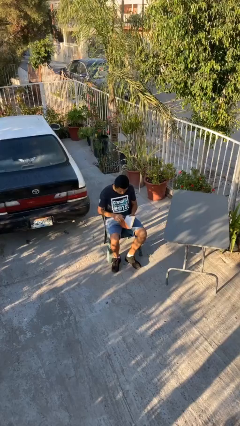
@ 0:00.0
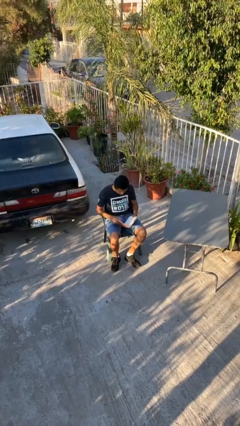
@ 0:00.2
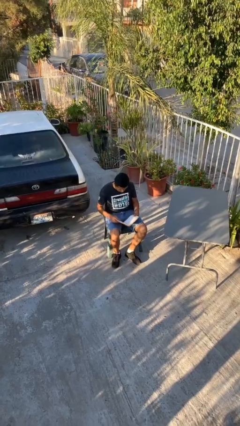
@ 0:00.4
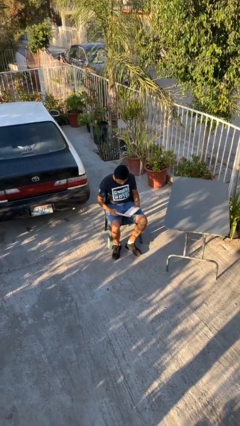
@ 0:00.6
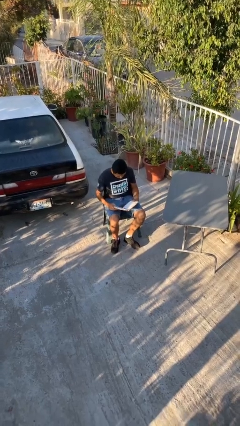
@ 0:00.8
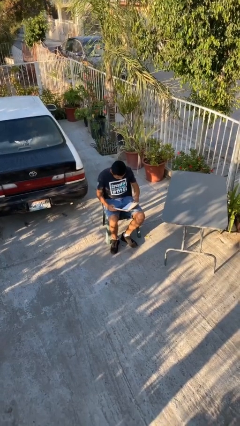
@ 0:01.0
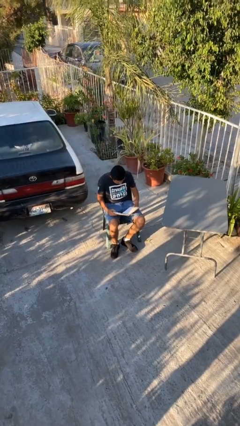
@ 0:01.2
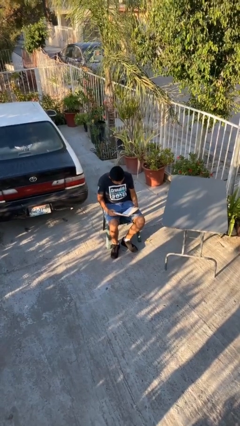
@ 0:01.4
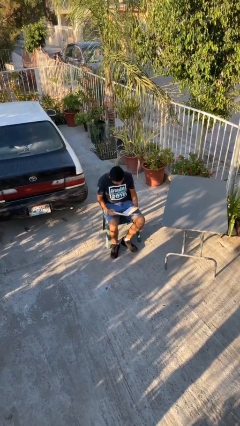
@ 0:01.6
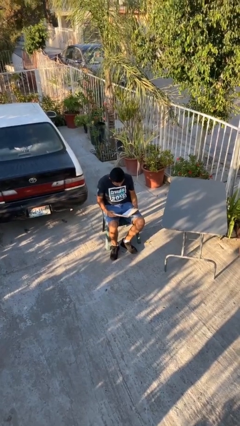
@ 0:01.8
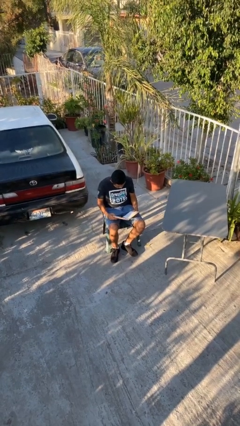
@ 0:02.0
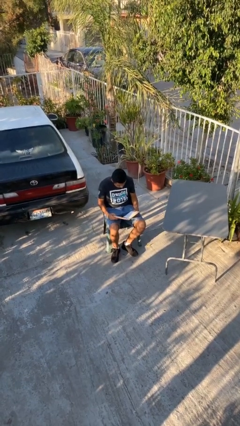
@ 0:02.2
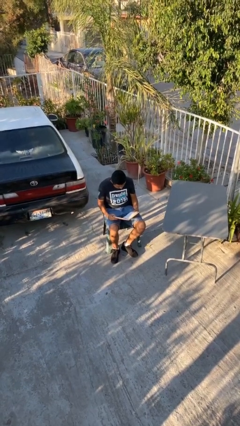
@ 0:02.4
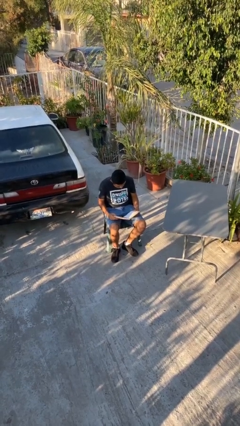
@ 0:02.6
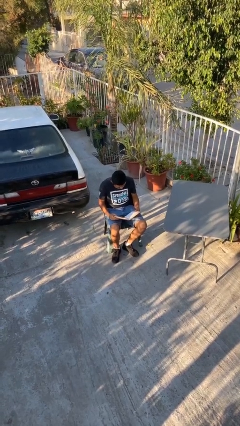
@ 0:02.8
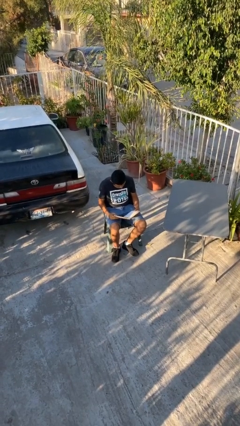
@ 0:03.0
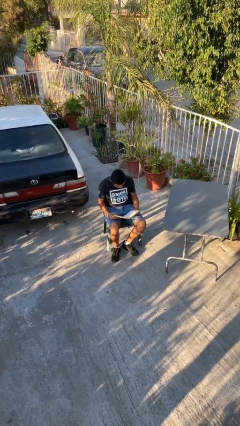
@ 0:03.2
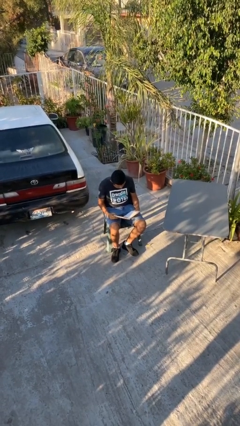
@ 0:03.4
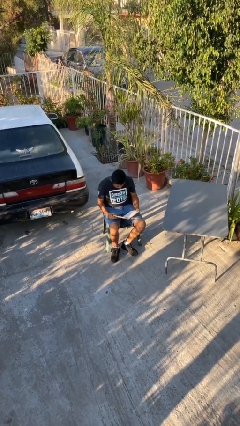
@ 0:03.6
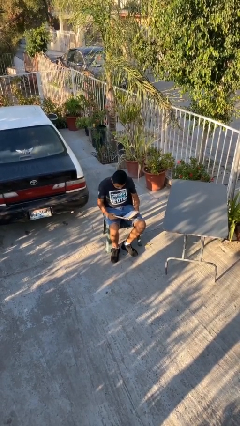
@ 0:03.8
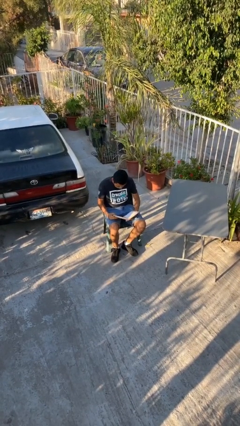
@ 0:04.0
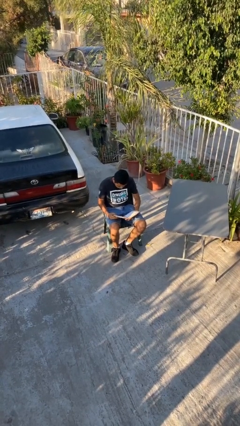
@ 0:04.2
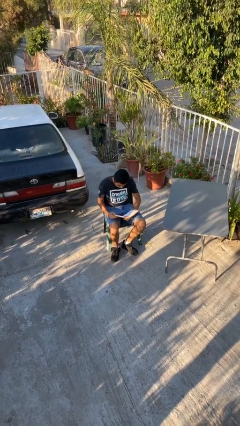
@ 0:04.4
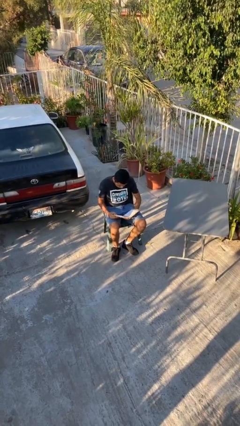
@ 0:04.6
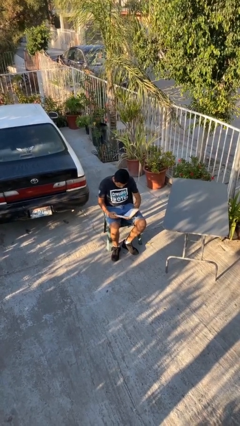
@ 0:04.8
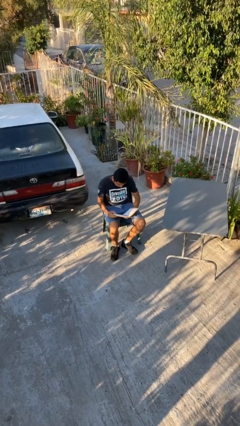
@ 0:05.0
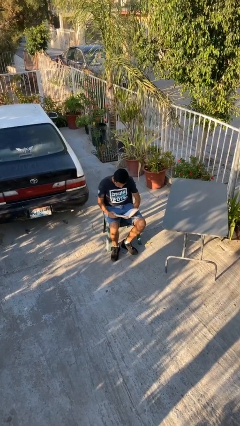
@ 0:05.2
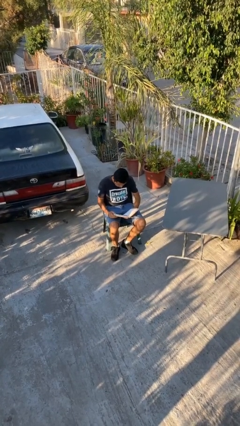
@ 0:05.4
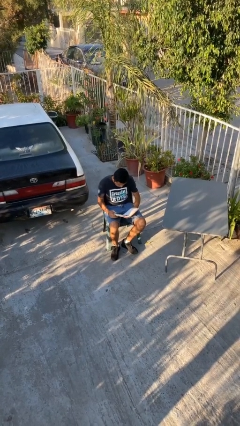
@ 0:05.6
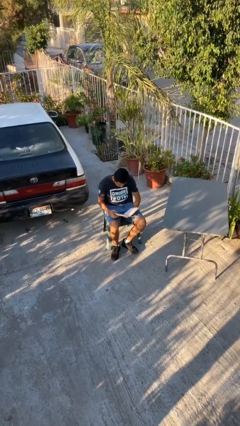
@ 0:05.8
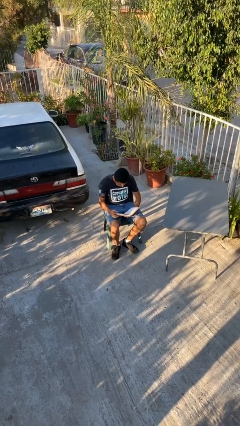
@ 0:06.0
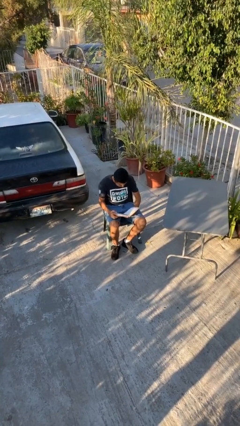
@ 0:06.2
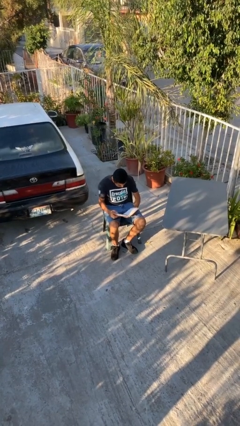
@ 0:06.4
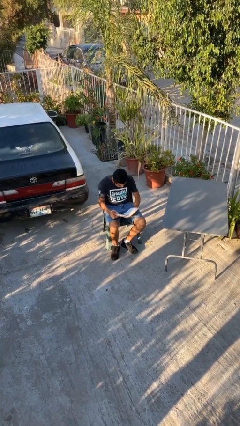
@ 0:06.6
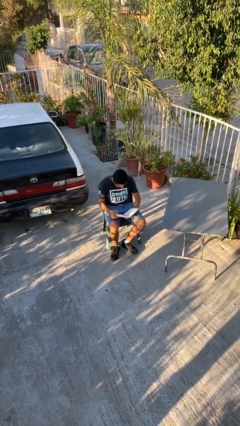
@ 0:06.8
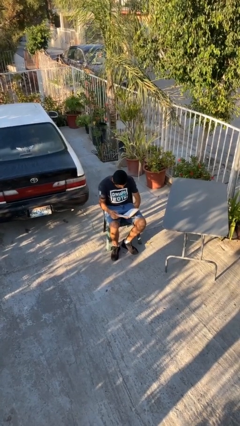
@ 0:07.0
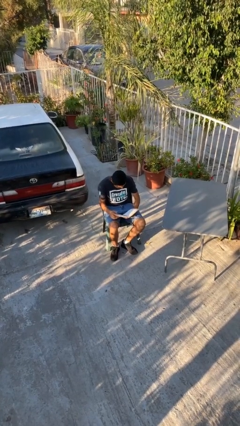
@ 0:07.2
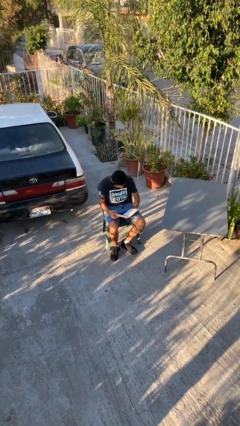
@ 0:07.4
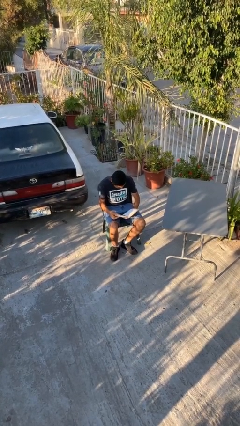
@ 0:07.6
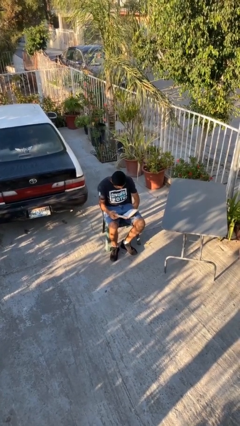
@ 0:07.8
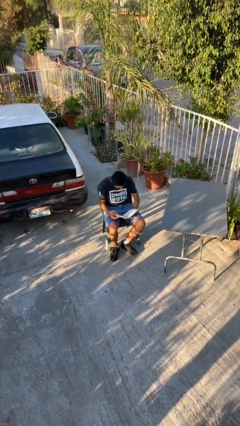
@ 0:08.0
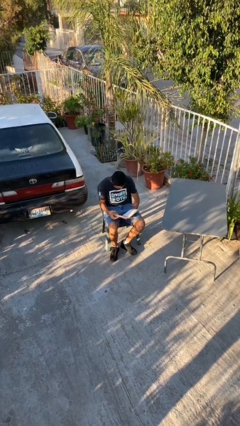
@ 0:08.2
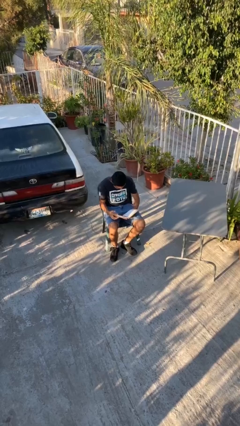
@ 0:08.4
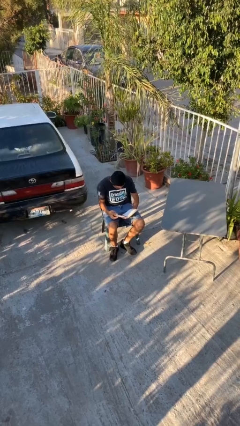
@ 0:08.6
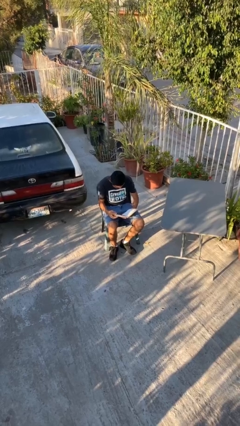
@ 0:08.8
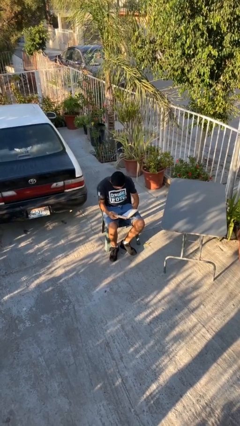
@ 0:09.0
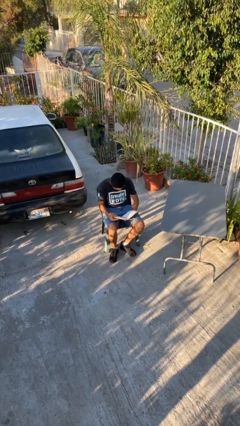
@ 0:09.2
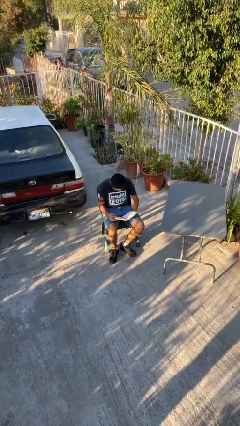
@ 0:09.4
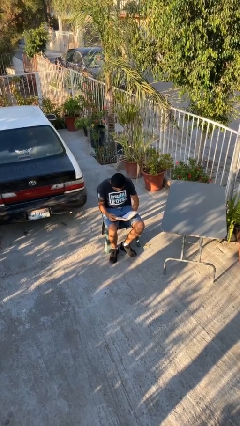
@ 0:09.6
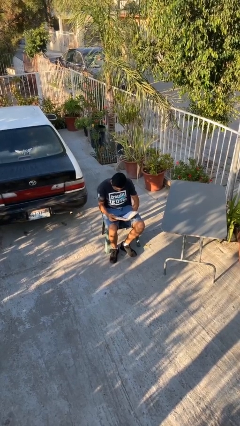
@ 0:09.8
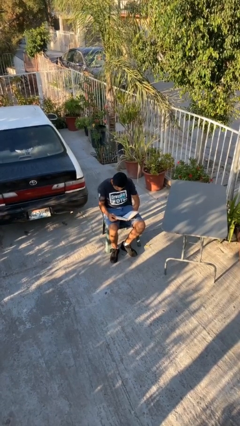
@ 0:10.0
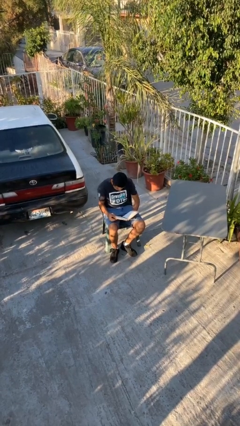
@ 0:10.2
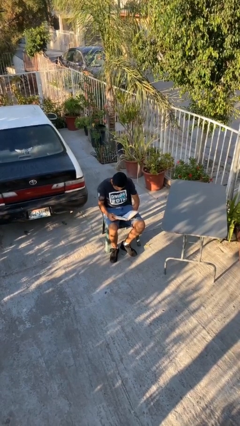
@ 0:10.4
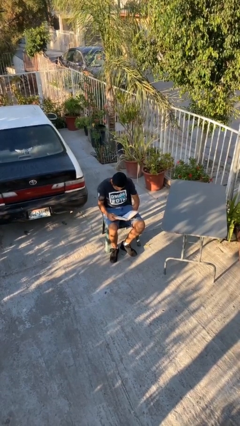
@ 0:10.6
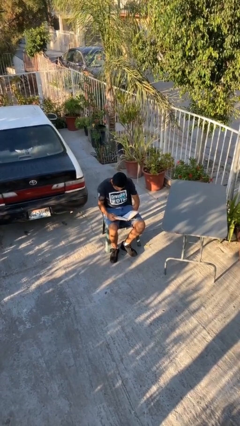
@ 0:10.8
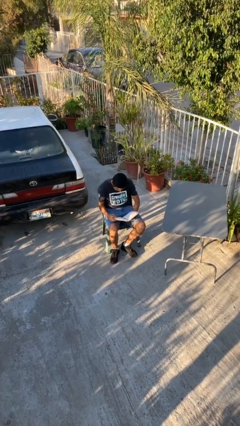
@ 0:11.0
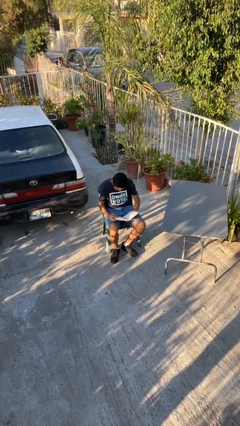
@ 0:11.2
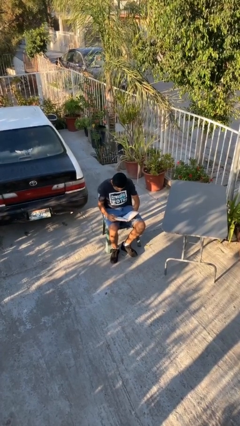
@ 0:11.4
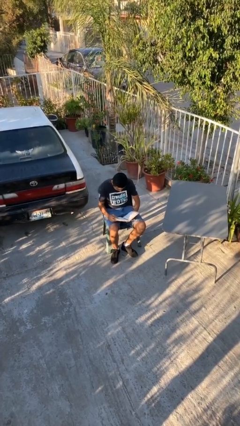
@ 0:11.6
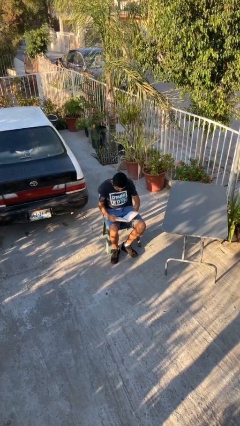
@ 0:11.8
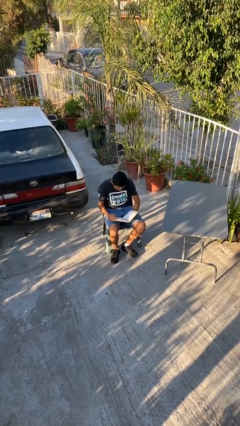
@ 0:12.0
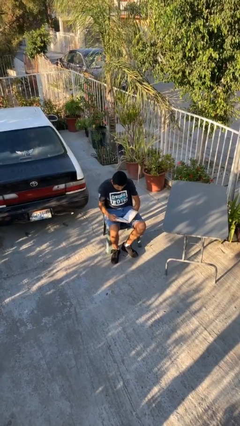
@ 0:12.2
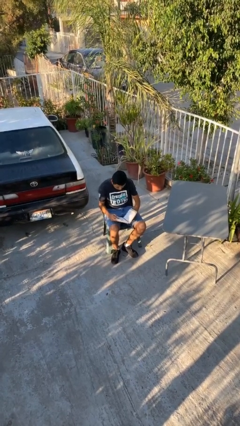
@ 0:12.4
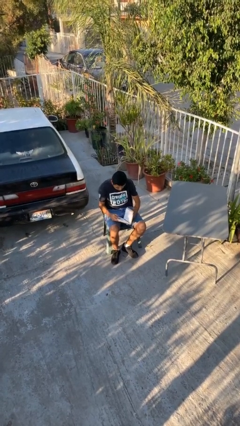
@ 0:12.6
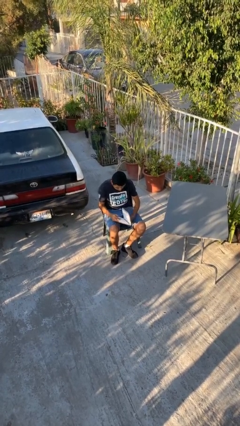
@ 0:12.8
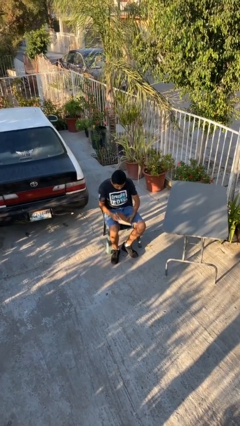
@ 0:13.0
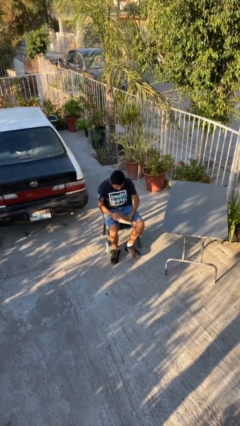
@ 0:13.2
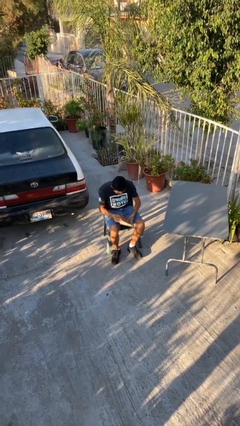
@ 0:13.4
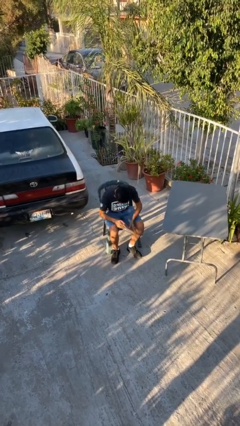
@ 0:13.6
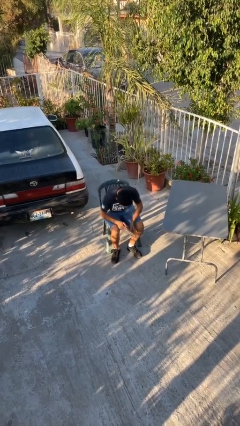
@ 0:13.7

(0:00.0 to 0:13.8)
person reads document

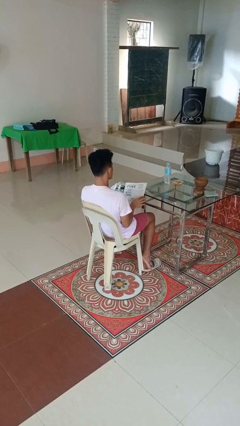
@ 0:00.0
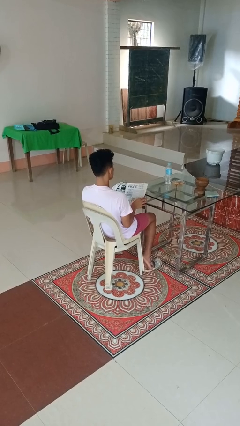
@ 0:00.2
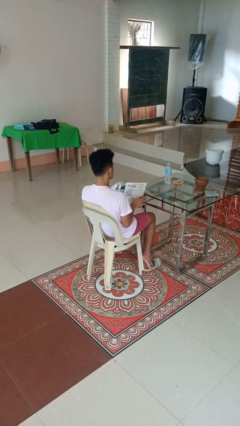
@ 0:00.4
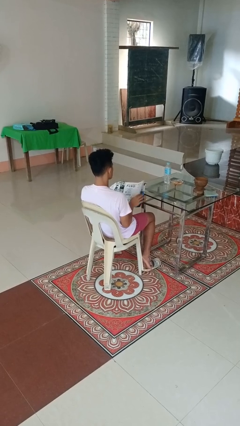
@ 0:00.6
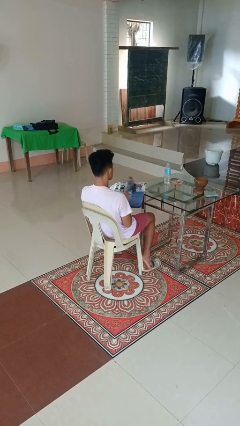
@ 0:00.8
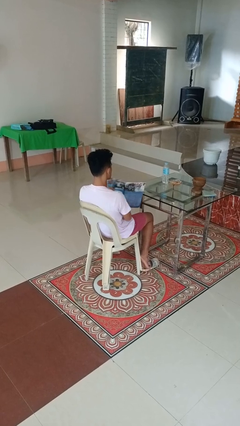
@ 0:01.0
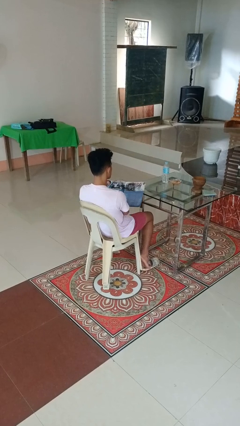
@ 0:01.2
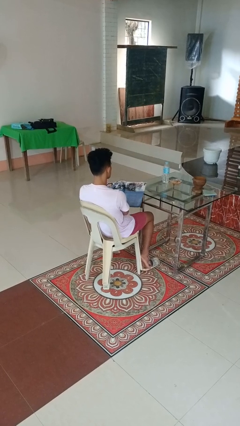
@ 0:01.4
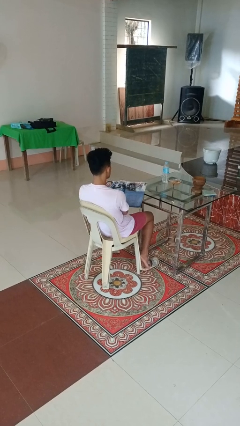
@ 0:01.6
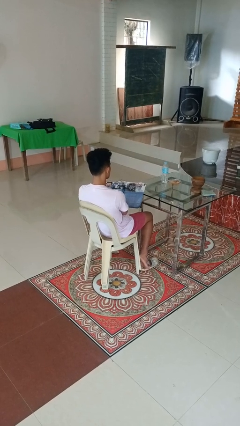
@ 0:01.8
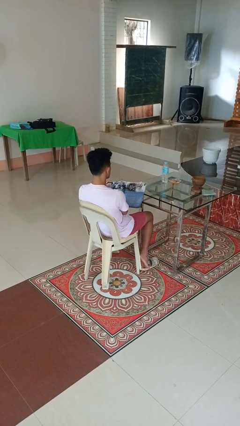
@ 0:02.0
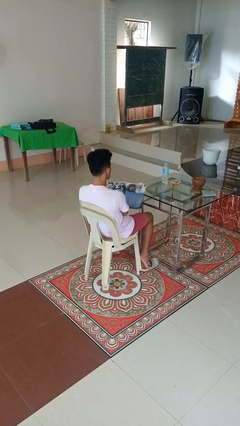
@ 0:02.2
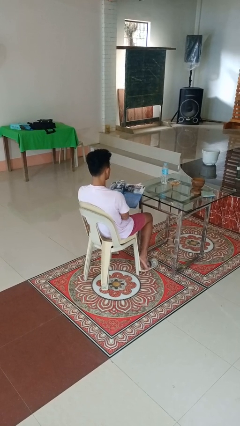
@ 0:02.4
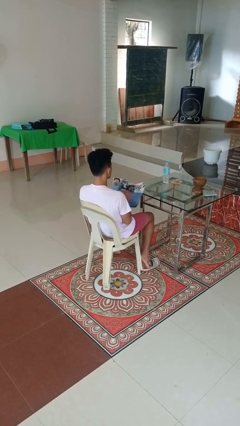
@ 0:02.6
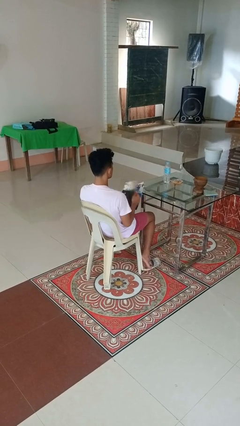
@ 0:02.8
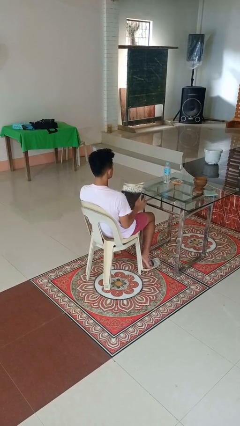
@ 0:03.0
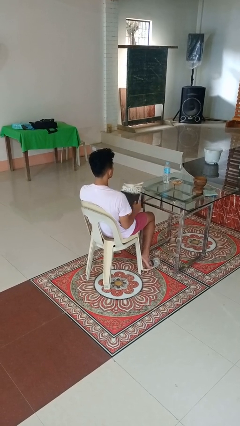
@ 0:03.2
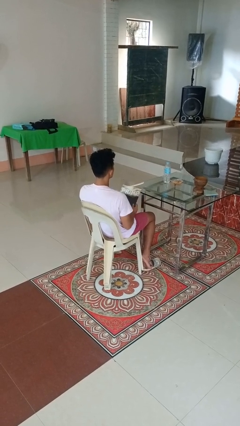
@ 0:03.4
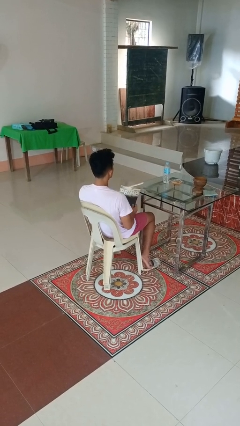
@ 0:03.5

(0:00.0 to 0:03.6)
person reads magazine

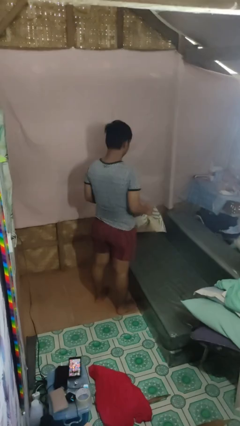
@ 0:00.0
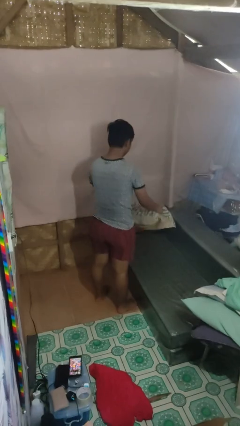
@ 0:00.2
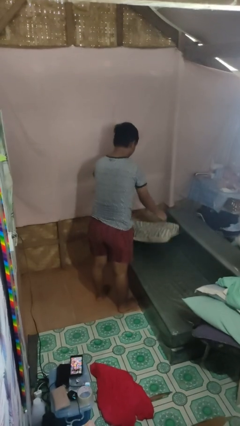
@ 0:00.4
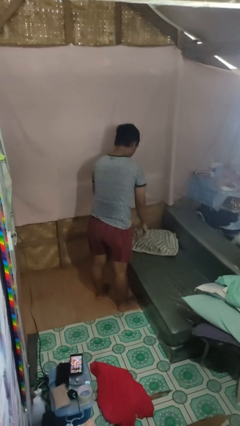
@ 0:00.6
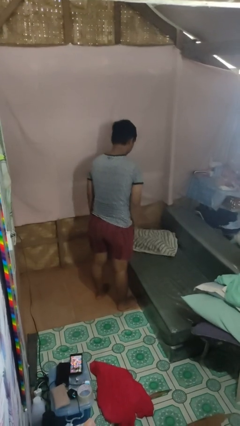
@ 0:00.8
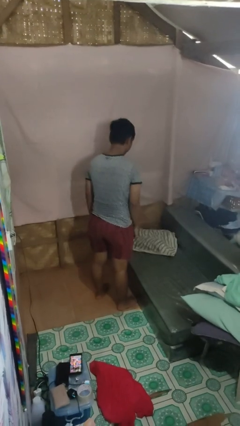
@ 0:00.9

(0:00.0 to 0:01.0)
person puts down object on couch
